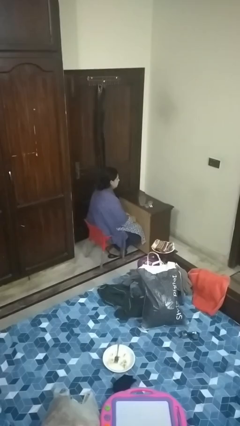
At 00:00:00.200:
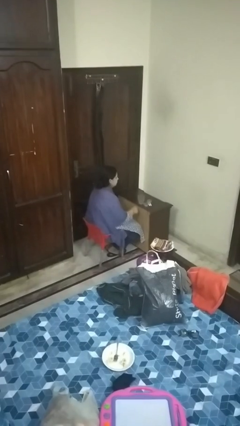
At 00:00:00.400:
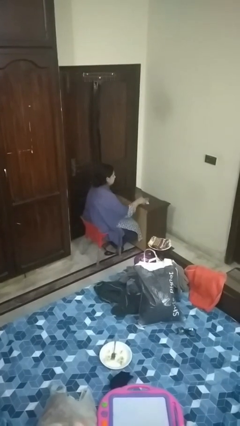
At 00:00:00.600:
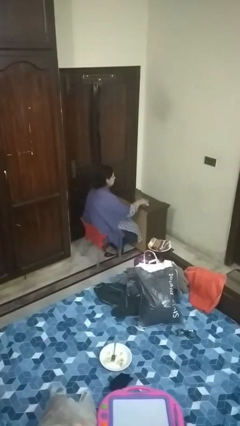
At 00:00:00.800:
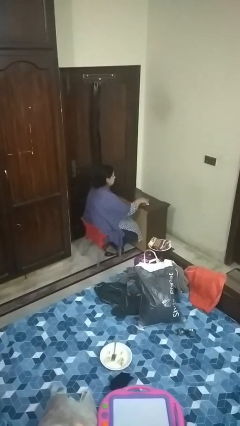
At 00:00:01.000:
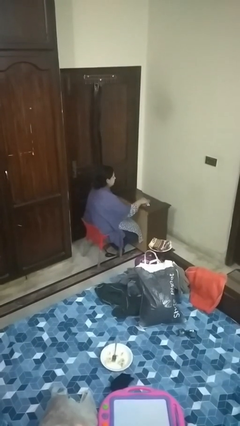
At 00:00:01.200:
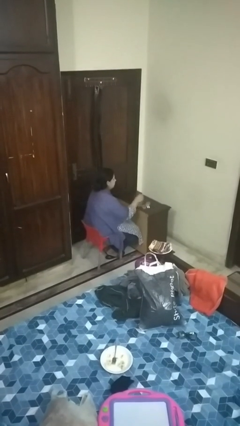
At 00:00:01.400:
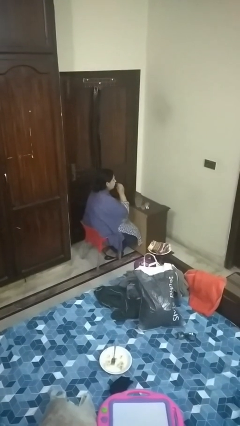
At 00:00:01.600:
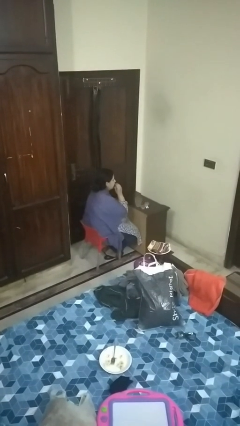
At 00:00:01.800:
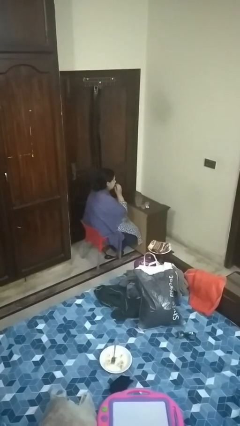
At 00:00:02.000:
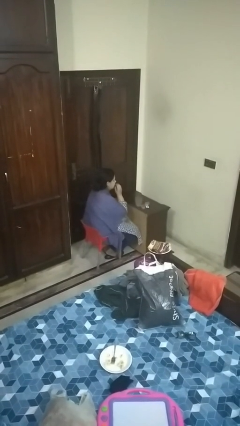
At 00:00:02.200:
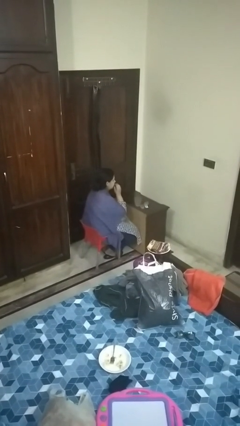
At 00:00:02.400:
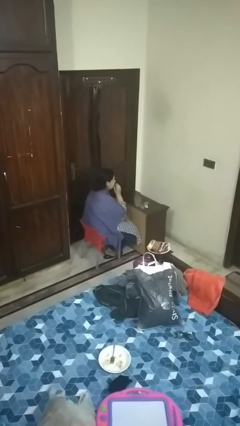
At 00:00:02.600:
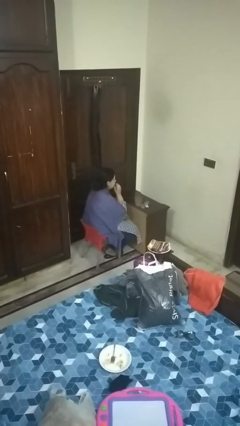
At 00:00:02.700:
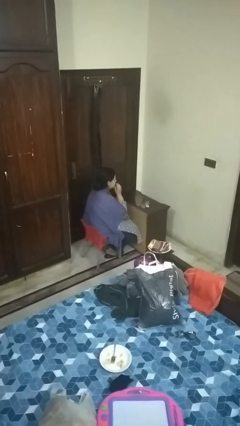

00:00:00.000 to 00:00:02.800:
person takes medicine pills

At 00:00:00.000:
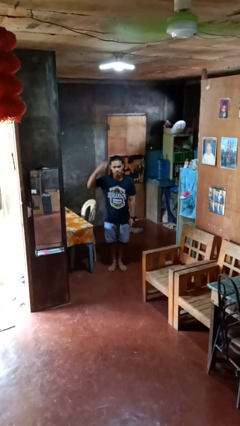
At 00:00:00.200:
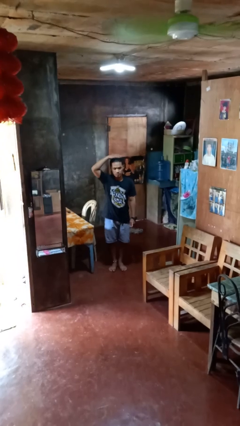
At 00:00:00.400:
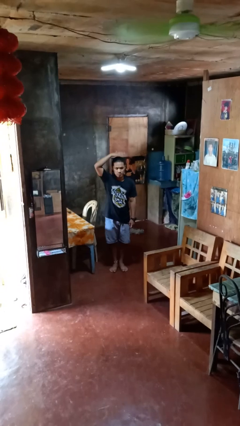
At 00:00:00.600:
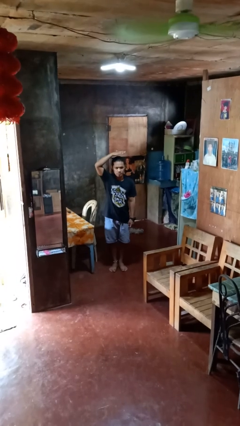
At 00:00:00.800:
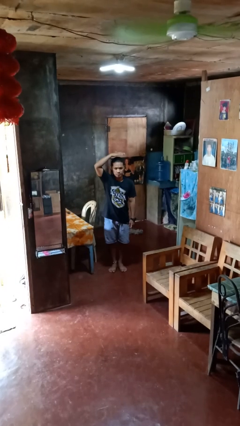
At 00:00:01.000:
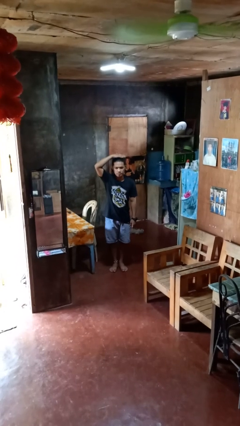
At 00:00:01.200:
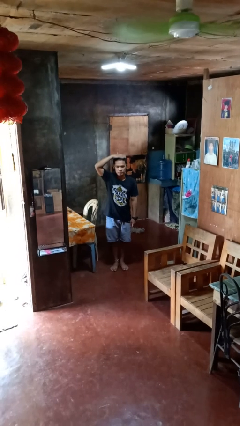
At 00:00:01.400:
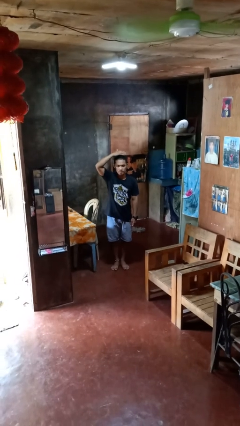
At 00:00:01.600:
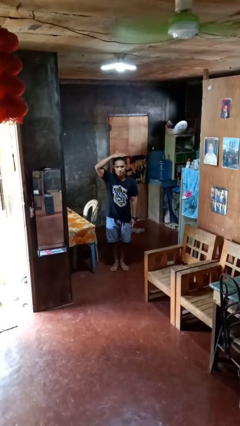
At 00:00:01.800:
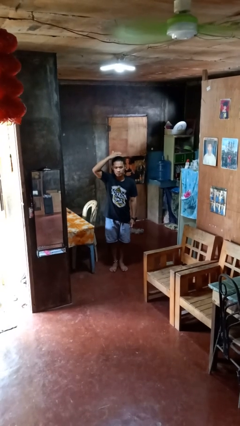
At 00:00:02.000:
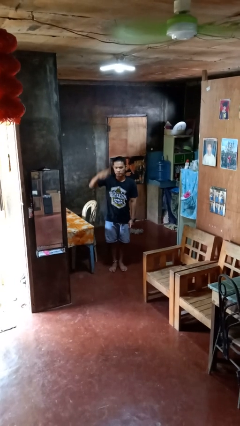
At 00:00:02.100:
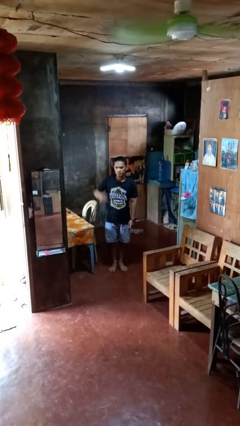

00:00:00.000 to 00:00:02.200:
person pats head

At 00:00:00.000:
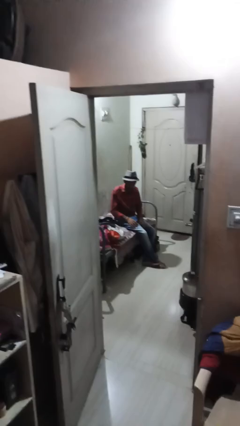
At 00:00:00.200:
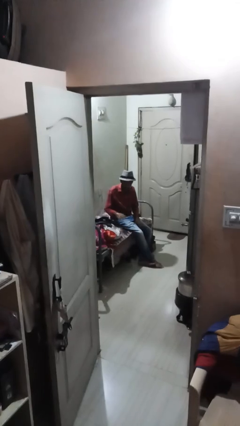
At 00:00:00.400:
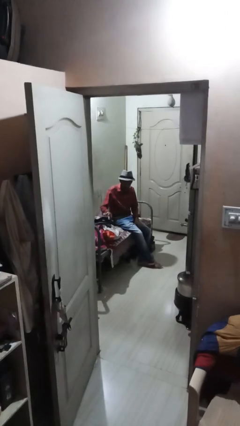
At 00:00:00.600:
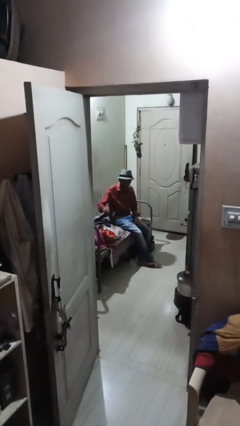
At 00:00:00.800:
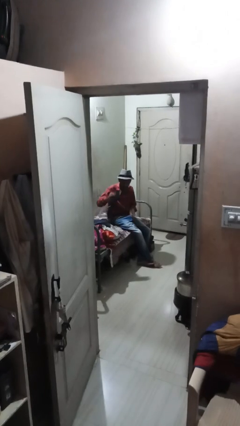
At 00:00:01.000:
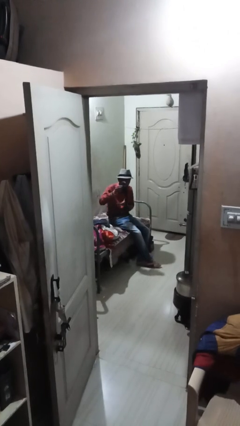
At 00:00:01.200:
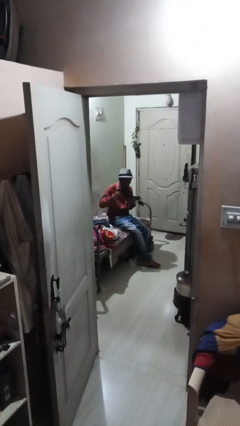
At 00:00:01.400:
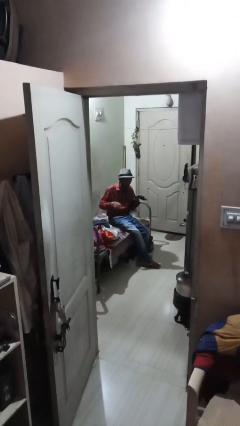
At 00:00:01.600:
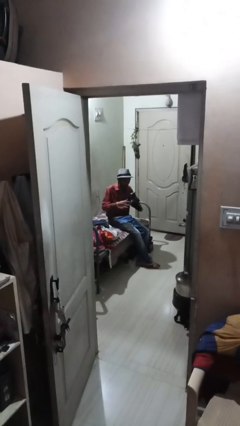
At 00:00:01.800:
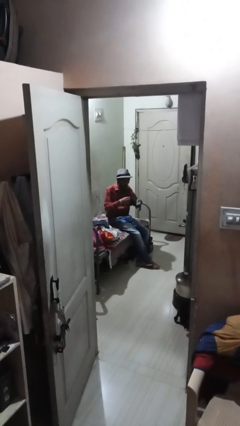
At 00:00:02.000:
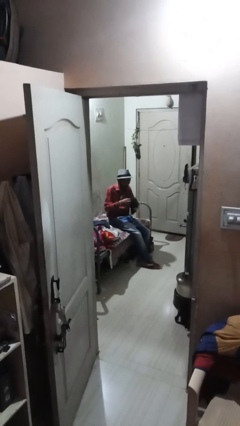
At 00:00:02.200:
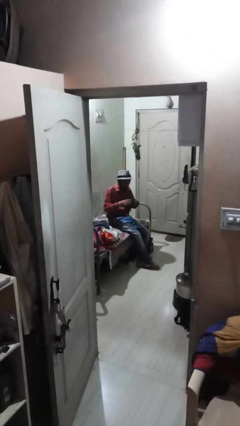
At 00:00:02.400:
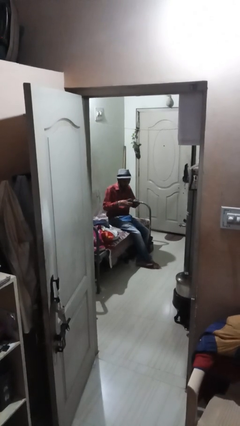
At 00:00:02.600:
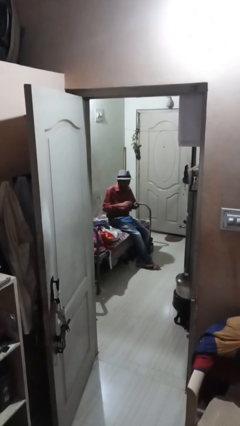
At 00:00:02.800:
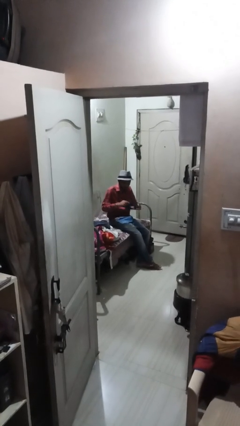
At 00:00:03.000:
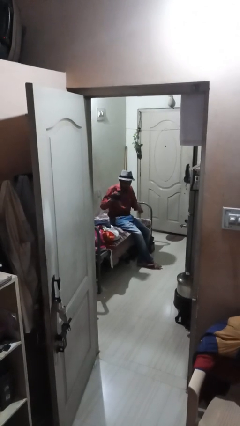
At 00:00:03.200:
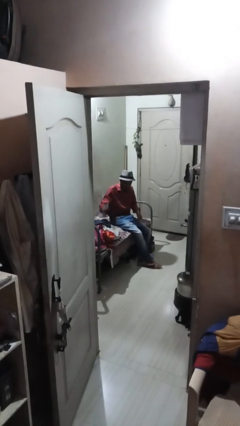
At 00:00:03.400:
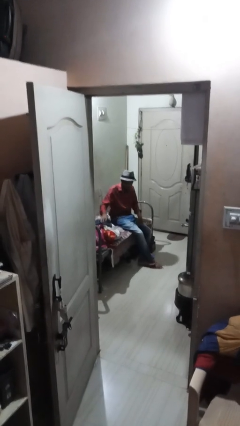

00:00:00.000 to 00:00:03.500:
person folds socks

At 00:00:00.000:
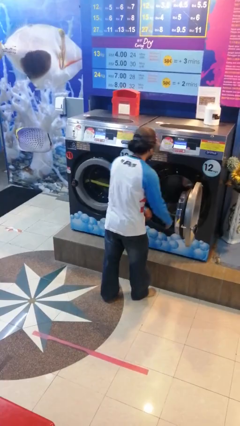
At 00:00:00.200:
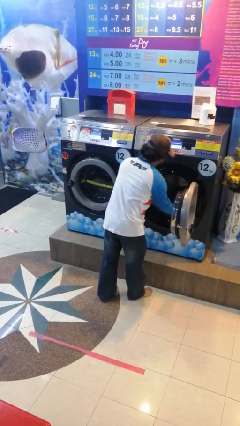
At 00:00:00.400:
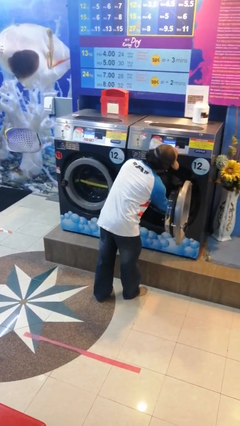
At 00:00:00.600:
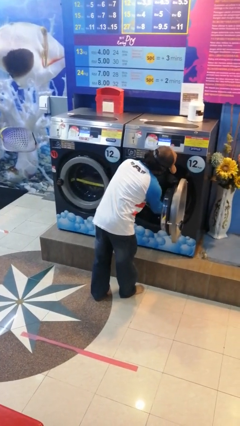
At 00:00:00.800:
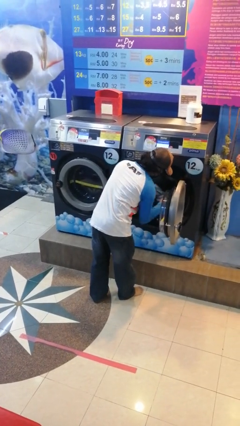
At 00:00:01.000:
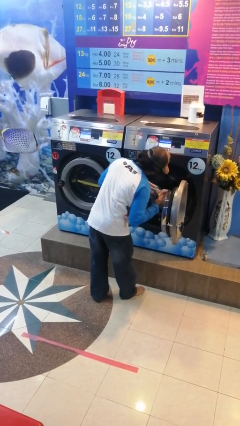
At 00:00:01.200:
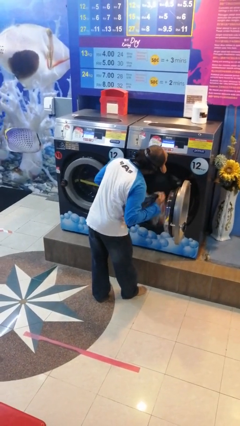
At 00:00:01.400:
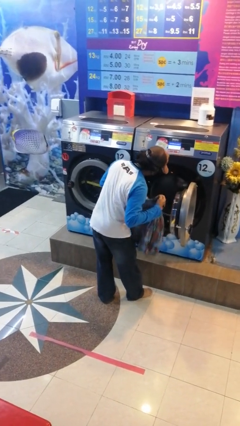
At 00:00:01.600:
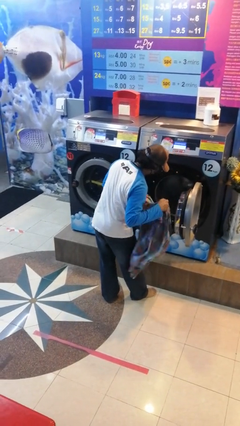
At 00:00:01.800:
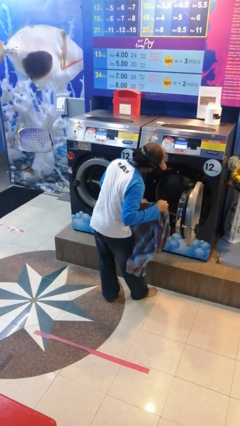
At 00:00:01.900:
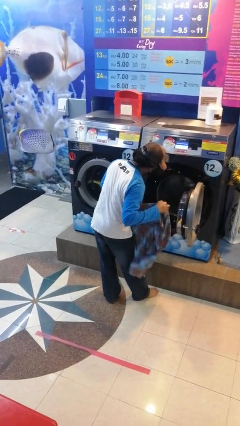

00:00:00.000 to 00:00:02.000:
person unloads clotheswasher

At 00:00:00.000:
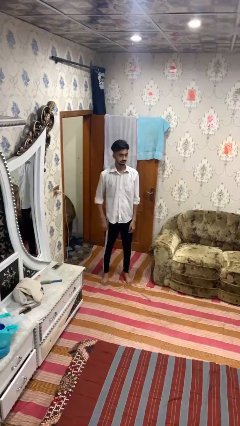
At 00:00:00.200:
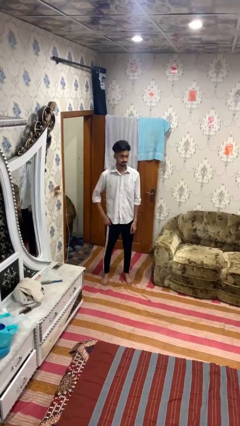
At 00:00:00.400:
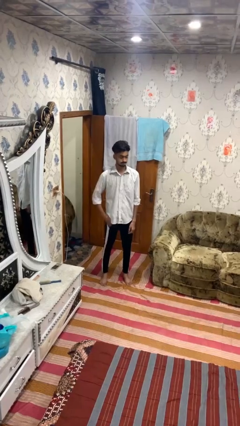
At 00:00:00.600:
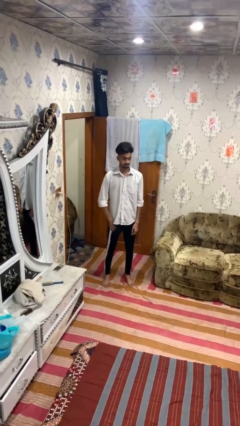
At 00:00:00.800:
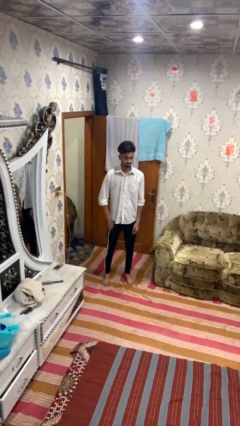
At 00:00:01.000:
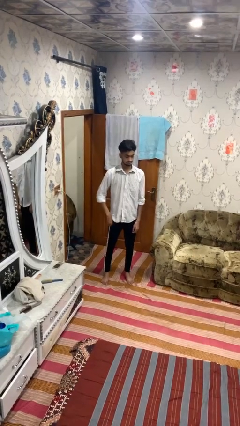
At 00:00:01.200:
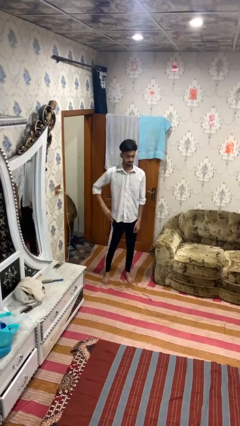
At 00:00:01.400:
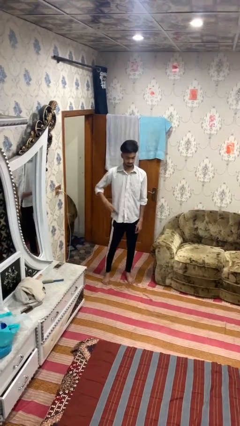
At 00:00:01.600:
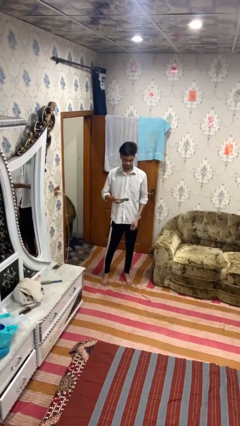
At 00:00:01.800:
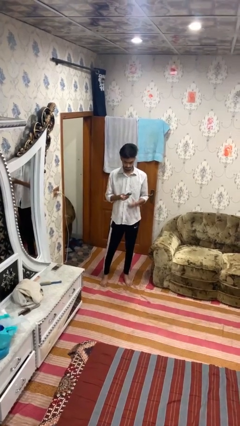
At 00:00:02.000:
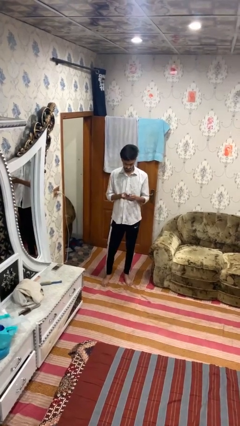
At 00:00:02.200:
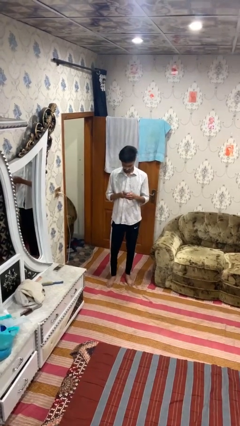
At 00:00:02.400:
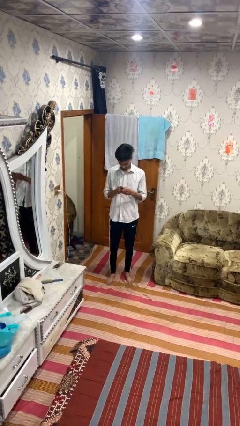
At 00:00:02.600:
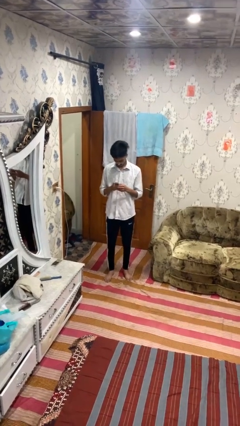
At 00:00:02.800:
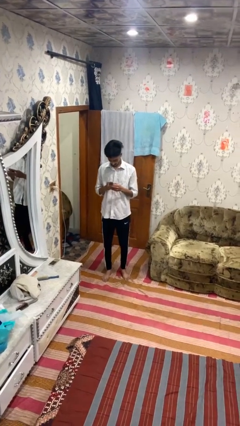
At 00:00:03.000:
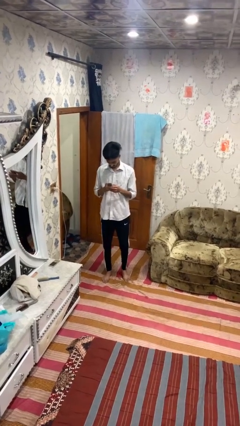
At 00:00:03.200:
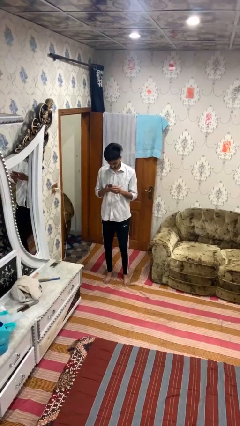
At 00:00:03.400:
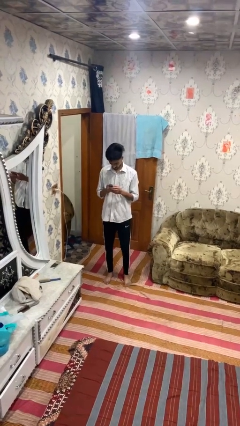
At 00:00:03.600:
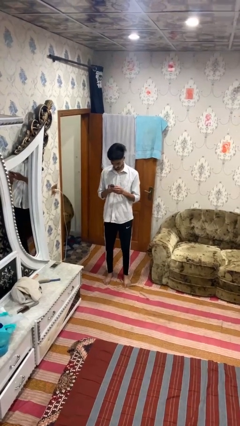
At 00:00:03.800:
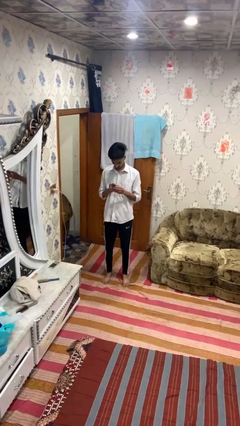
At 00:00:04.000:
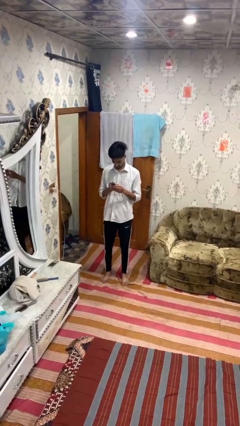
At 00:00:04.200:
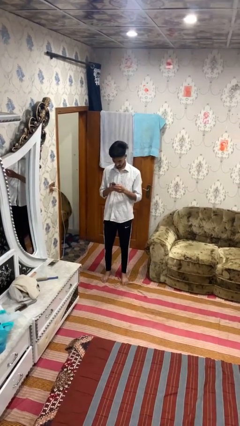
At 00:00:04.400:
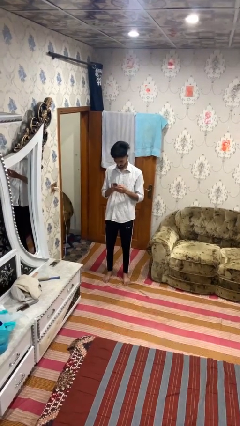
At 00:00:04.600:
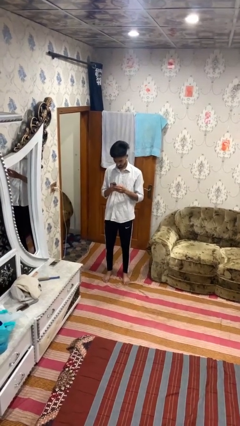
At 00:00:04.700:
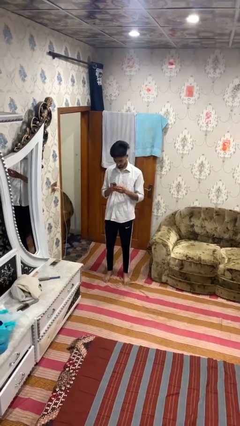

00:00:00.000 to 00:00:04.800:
person takes phone from pocket

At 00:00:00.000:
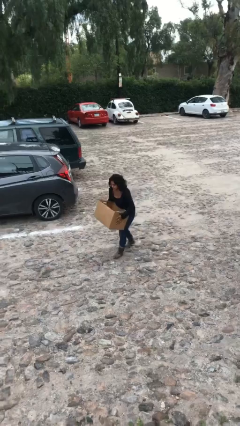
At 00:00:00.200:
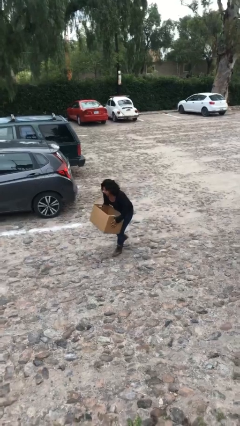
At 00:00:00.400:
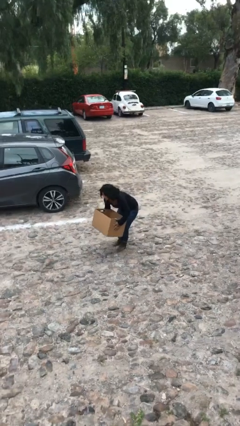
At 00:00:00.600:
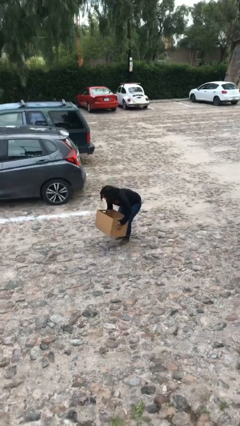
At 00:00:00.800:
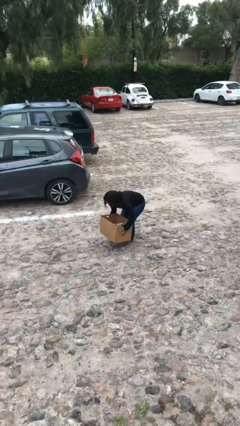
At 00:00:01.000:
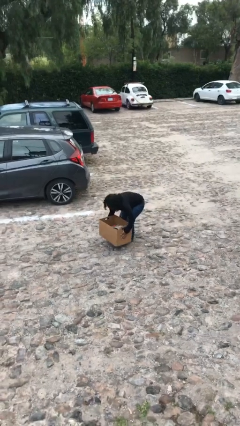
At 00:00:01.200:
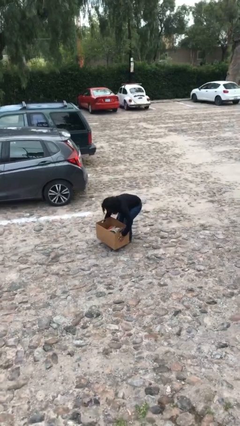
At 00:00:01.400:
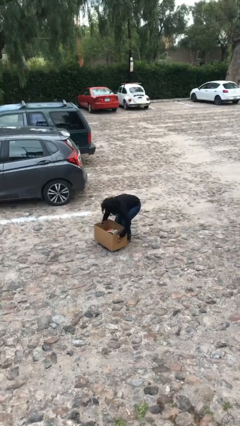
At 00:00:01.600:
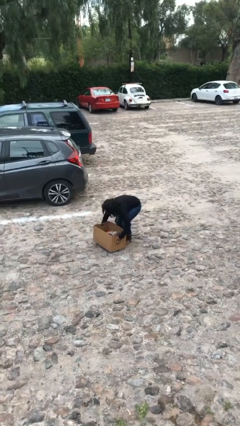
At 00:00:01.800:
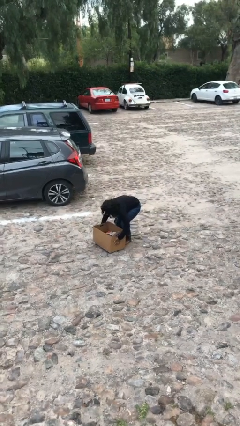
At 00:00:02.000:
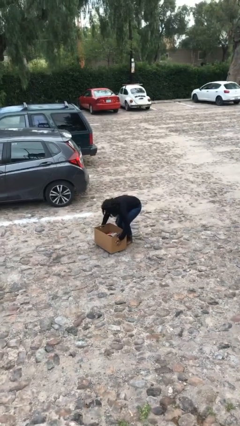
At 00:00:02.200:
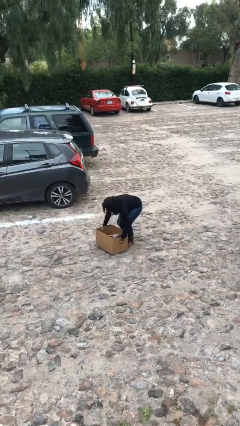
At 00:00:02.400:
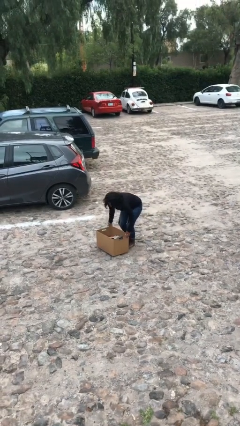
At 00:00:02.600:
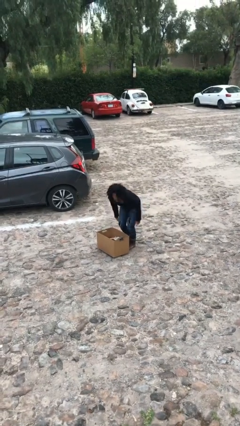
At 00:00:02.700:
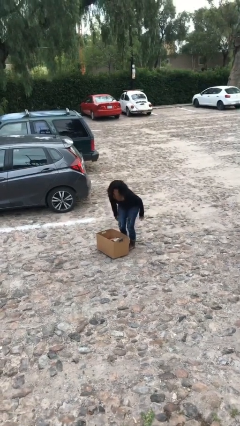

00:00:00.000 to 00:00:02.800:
person puts down object on floor
